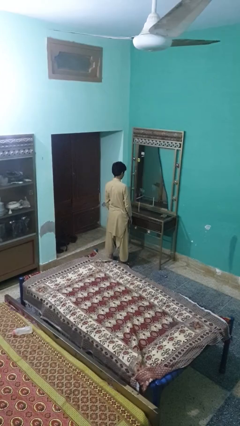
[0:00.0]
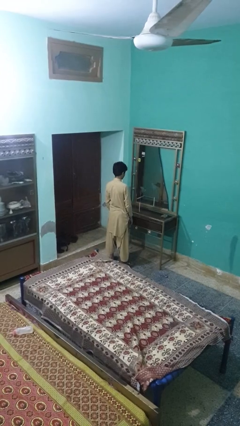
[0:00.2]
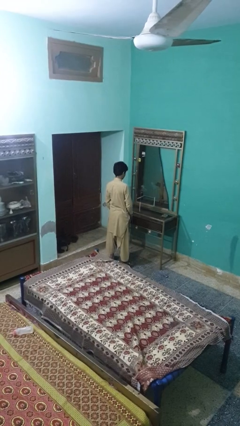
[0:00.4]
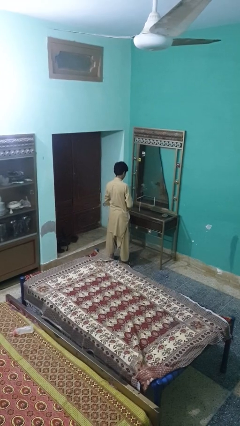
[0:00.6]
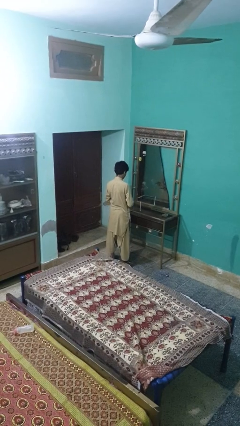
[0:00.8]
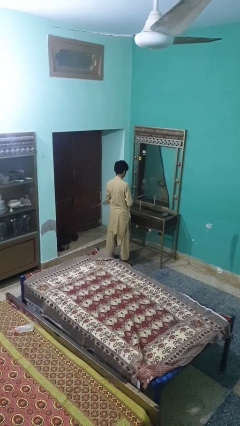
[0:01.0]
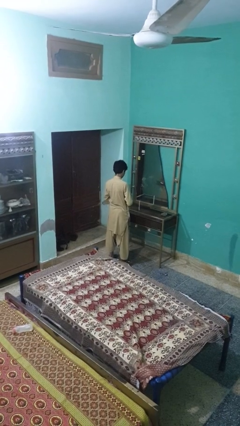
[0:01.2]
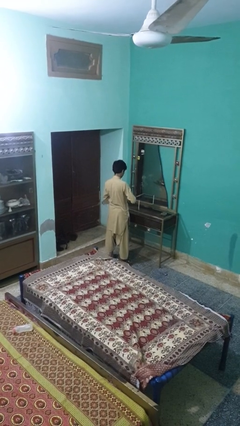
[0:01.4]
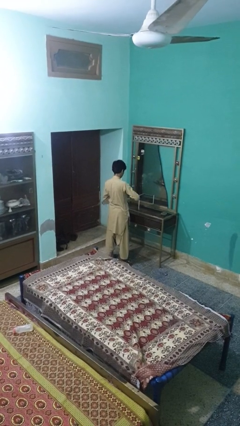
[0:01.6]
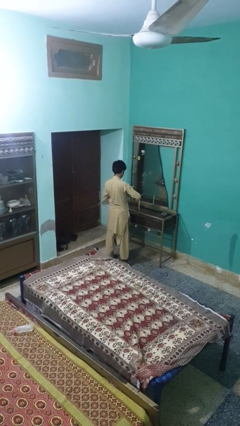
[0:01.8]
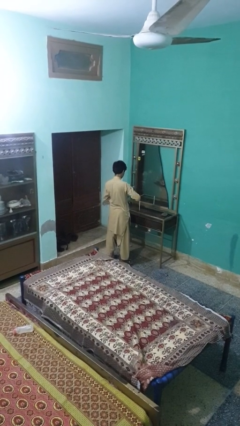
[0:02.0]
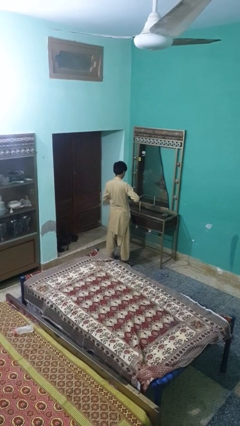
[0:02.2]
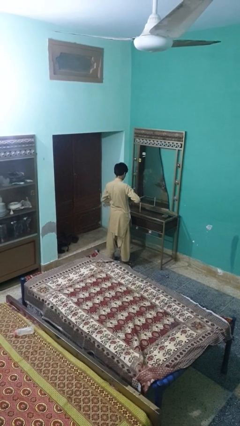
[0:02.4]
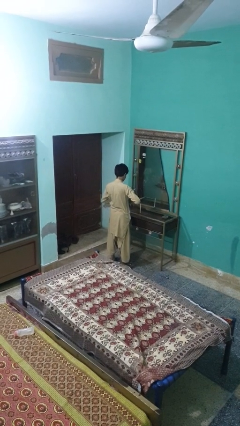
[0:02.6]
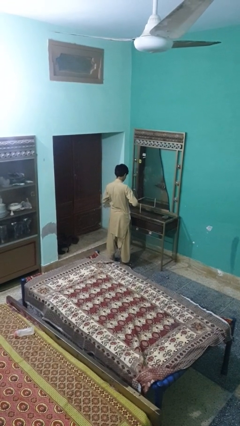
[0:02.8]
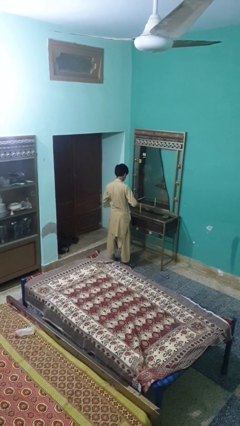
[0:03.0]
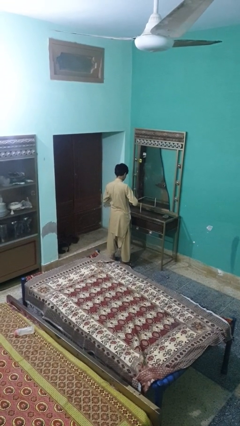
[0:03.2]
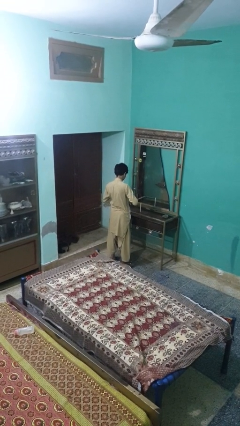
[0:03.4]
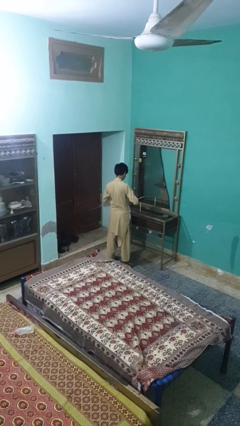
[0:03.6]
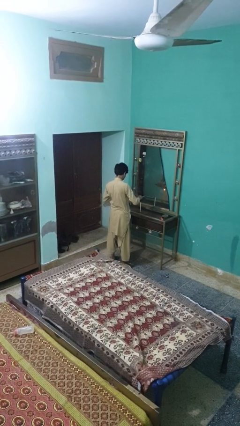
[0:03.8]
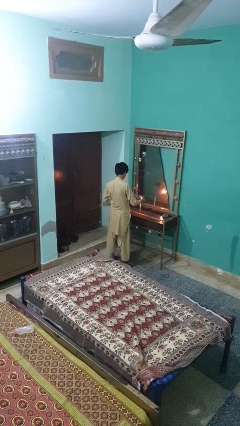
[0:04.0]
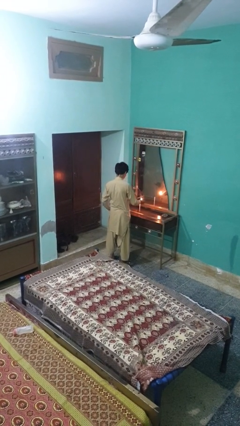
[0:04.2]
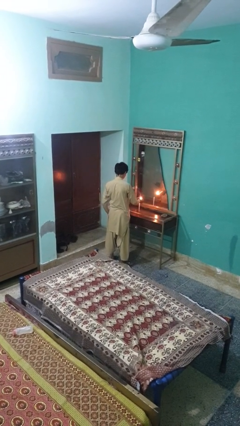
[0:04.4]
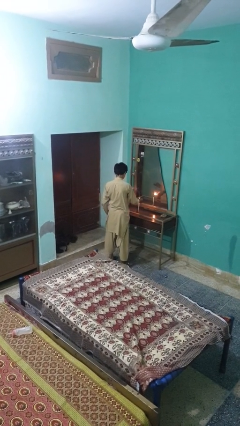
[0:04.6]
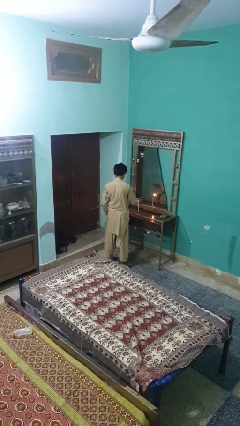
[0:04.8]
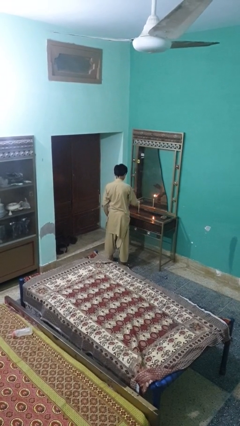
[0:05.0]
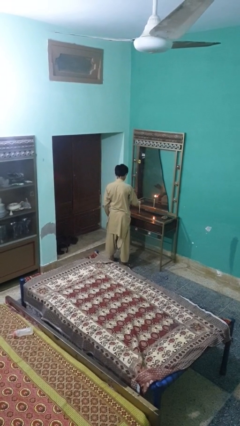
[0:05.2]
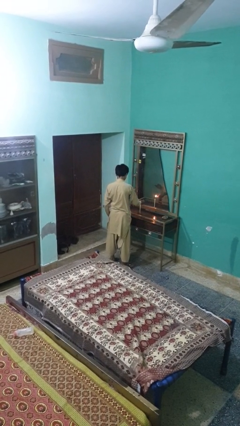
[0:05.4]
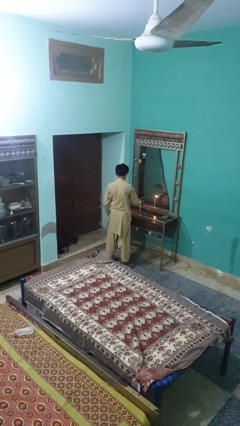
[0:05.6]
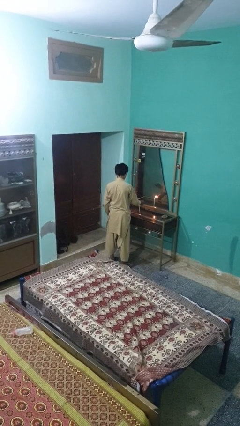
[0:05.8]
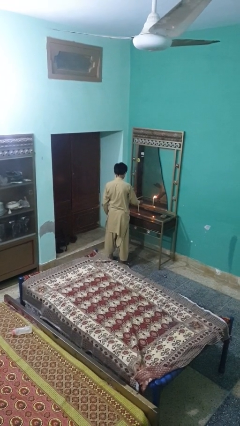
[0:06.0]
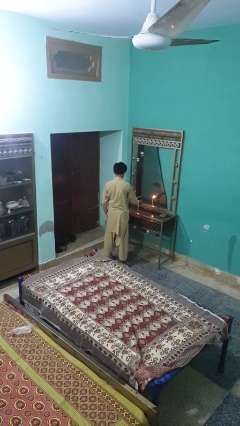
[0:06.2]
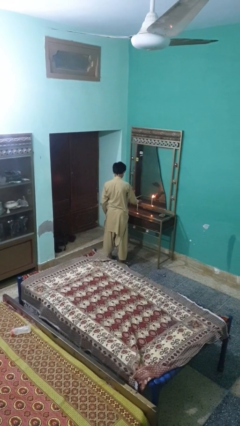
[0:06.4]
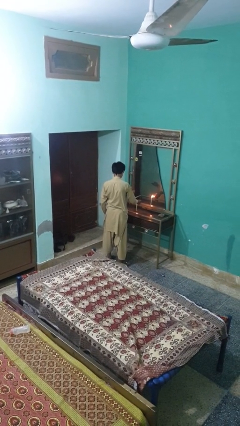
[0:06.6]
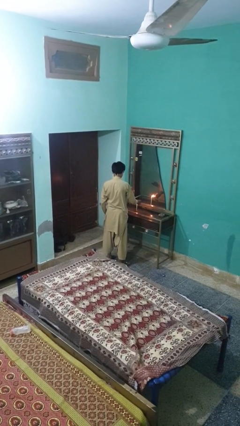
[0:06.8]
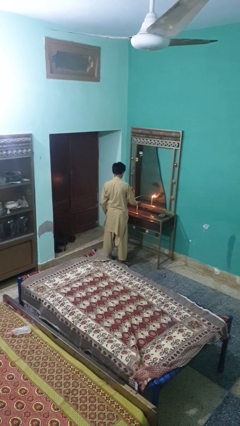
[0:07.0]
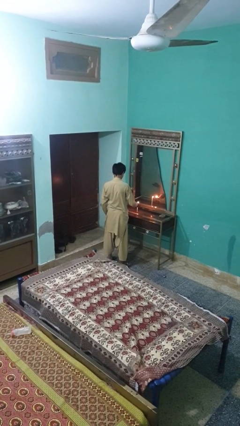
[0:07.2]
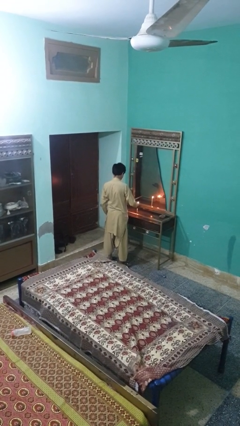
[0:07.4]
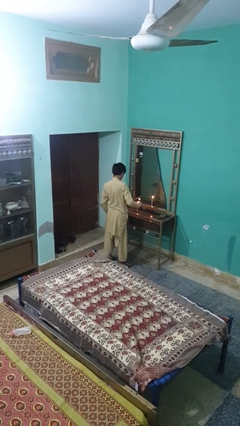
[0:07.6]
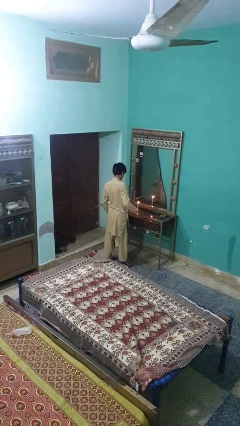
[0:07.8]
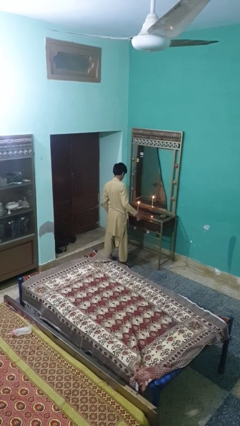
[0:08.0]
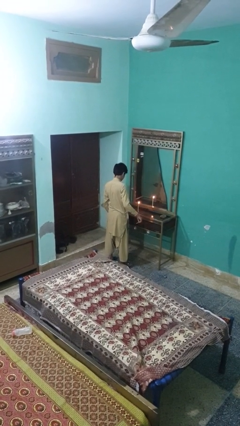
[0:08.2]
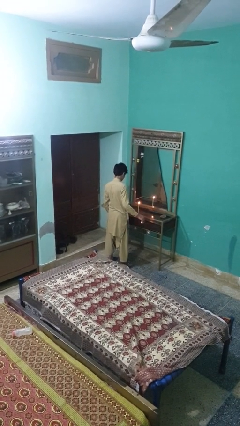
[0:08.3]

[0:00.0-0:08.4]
person lights candle

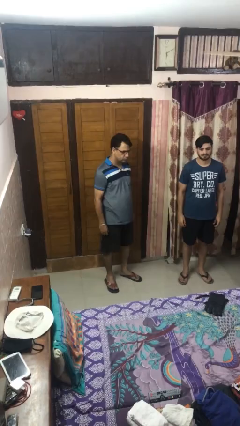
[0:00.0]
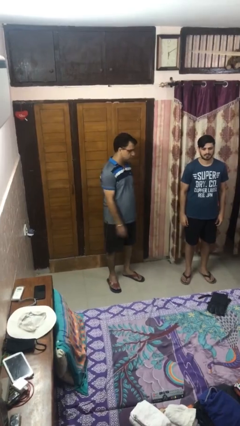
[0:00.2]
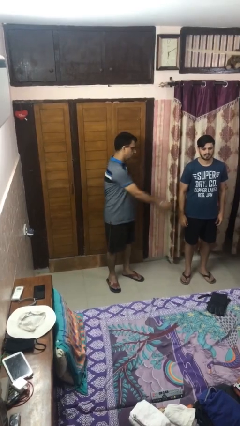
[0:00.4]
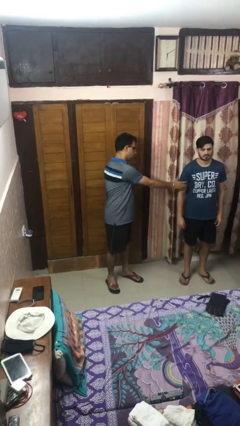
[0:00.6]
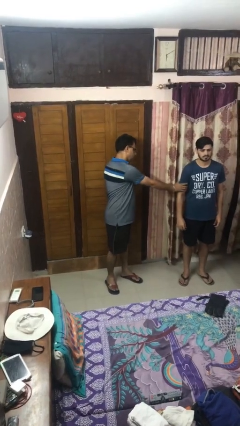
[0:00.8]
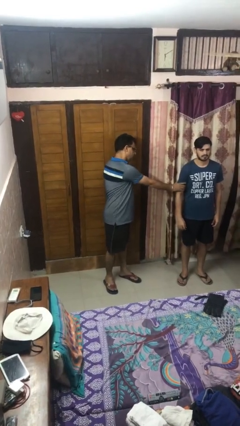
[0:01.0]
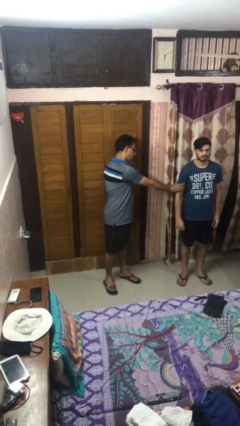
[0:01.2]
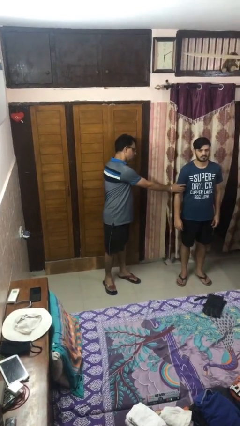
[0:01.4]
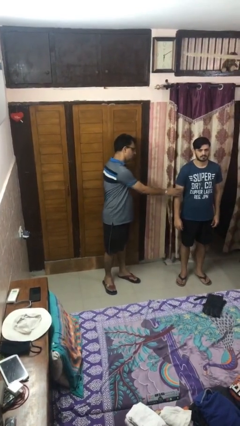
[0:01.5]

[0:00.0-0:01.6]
person grabs person by bicep

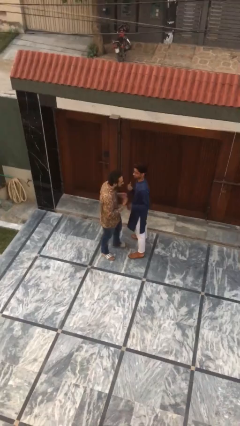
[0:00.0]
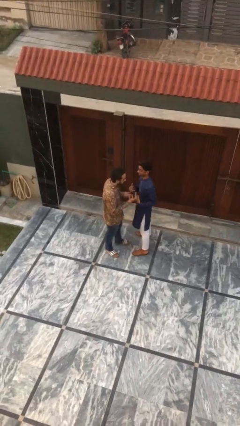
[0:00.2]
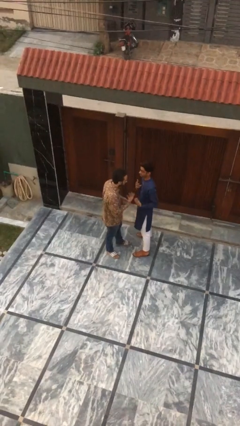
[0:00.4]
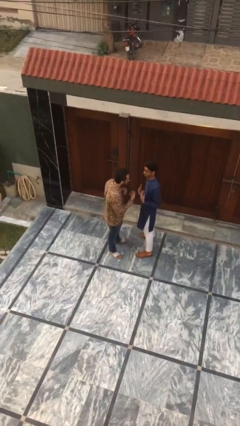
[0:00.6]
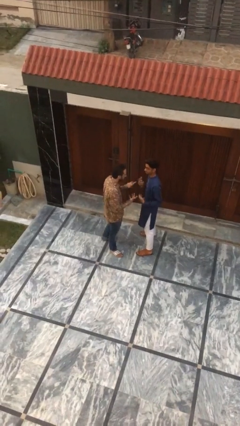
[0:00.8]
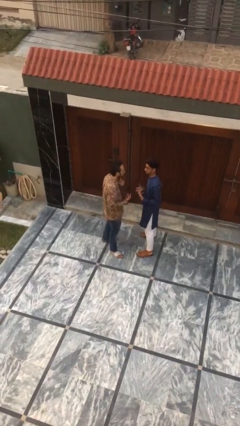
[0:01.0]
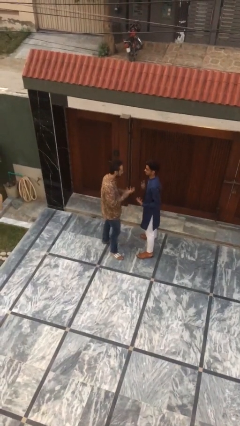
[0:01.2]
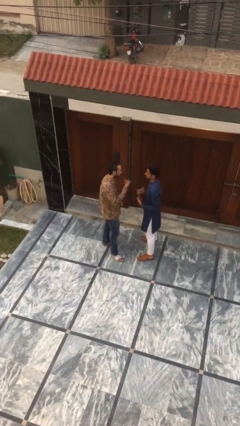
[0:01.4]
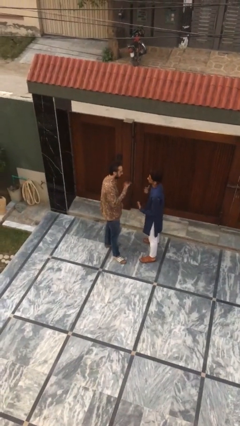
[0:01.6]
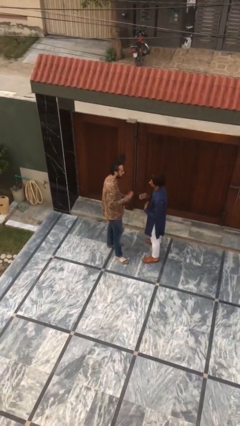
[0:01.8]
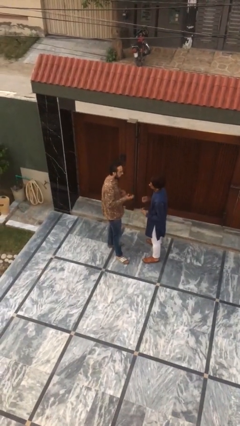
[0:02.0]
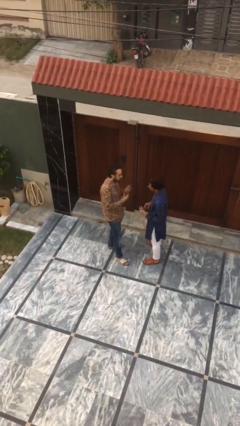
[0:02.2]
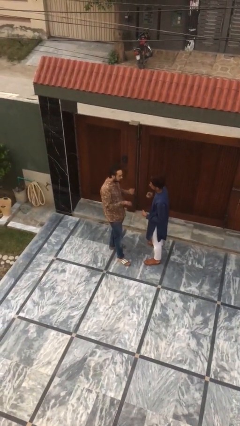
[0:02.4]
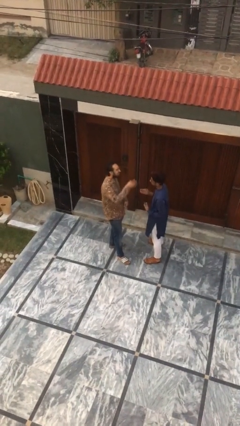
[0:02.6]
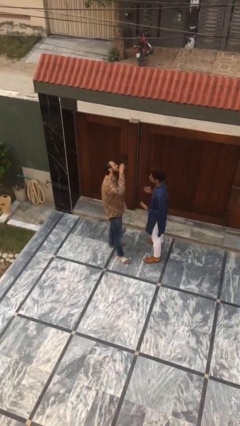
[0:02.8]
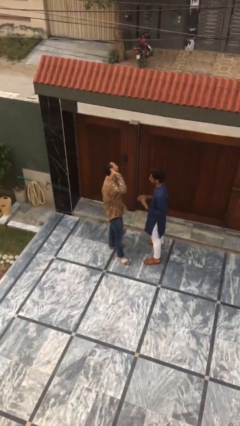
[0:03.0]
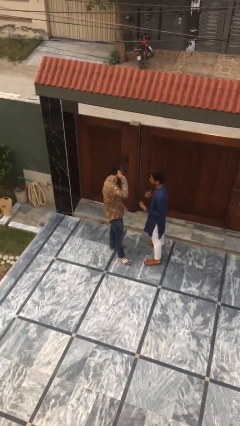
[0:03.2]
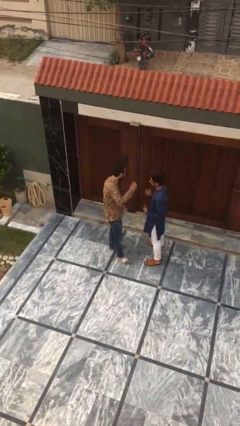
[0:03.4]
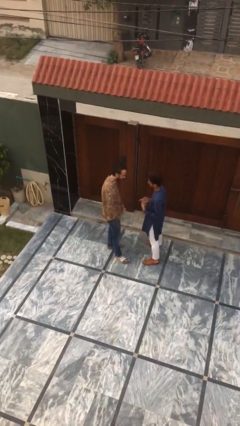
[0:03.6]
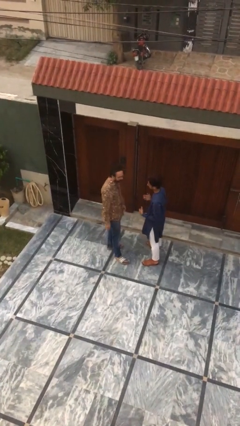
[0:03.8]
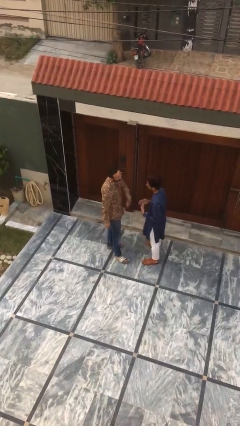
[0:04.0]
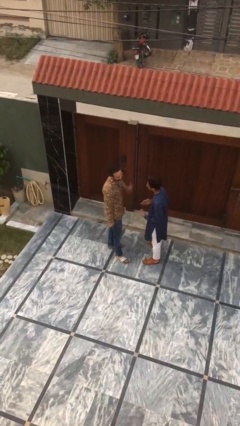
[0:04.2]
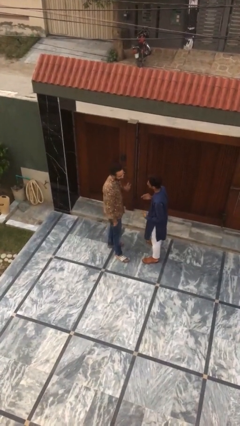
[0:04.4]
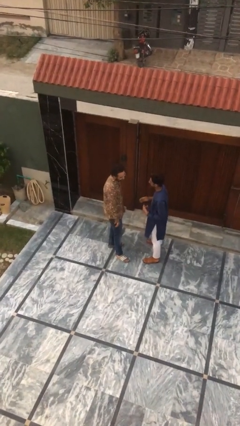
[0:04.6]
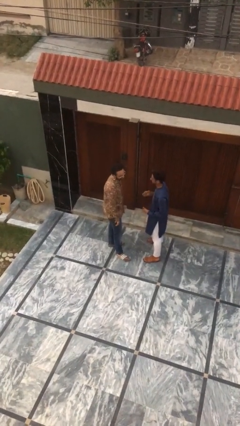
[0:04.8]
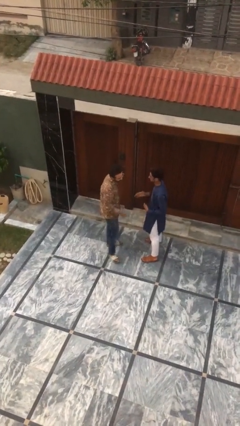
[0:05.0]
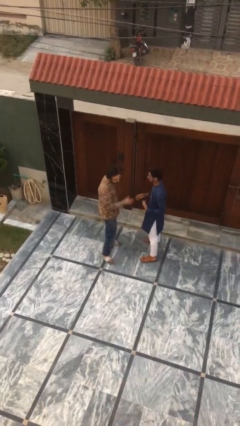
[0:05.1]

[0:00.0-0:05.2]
person talks to person

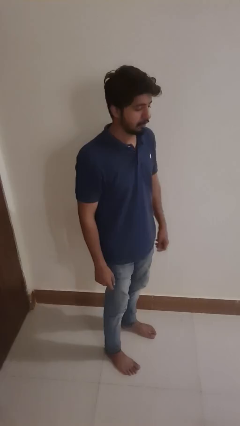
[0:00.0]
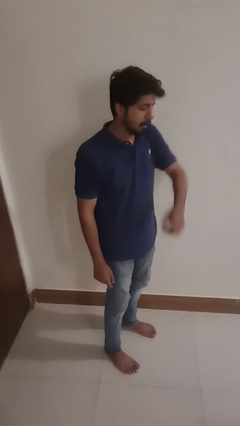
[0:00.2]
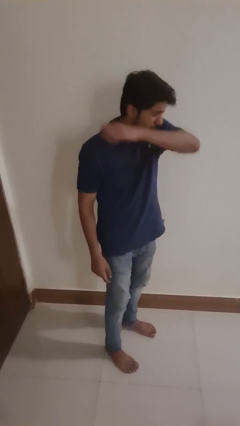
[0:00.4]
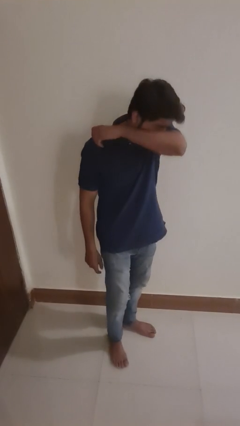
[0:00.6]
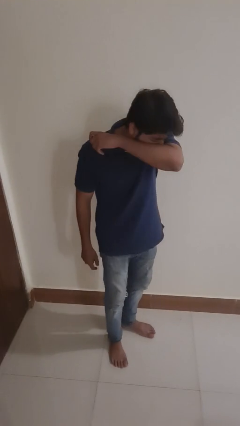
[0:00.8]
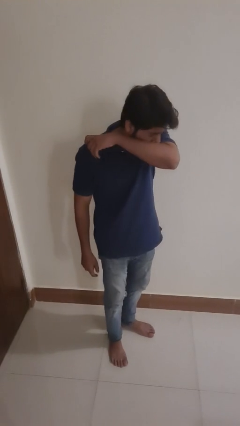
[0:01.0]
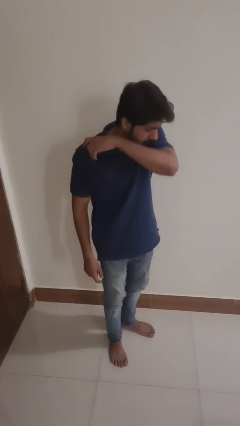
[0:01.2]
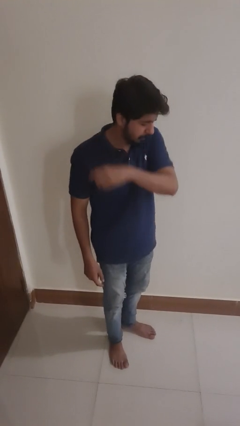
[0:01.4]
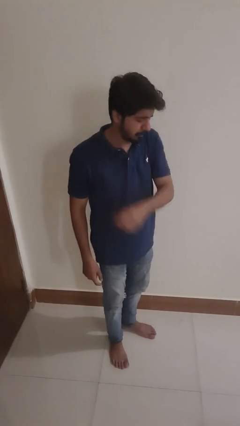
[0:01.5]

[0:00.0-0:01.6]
person sneezes into arm

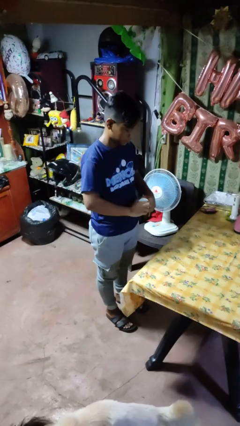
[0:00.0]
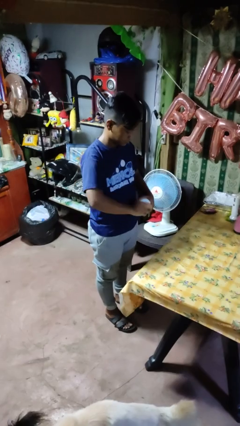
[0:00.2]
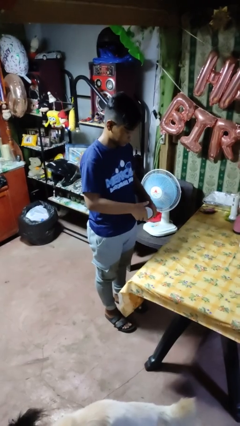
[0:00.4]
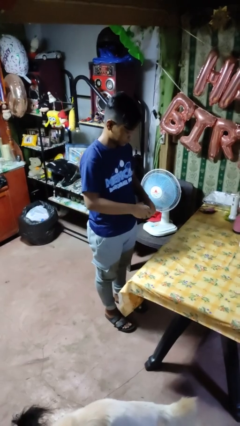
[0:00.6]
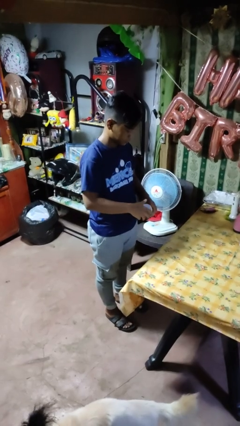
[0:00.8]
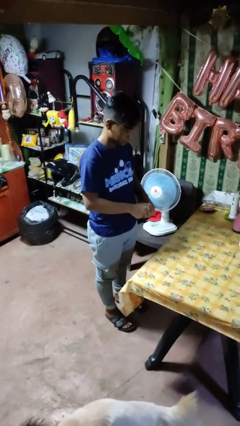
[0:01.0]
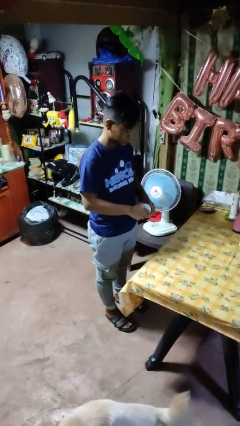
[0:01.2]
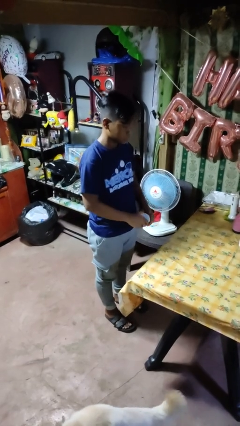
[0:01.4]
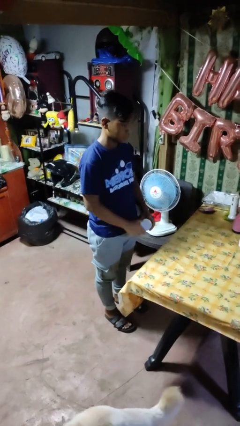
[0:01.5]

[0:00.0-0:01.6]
person closes jar
